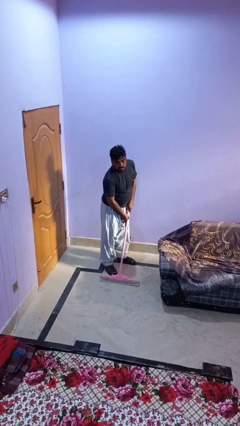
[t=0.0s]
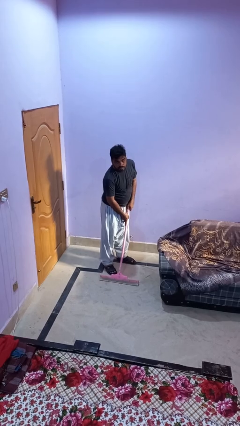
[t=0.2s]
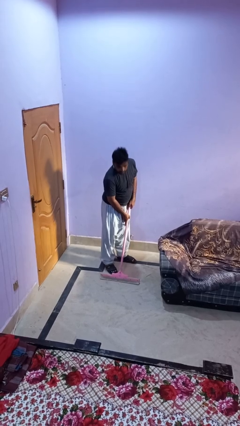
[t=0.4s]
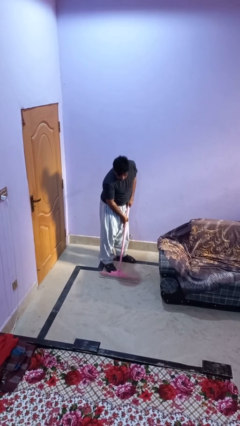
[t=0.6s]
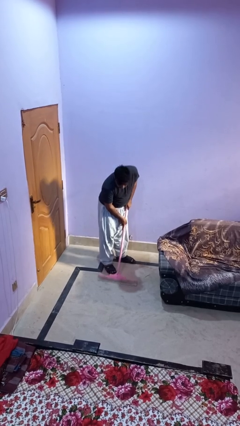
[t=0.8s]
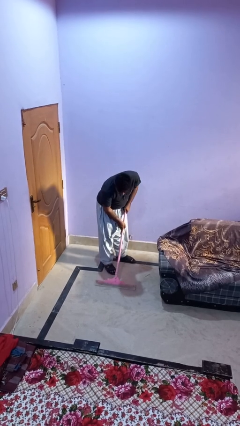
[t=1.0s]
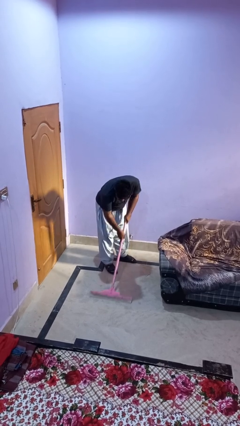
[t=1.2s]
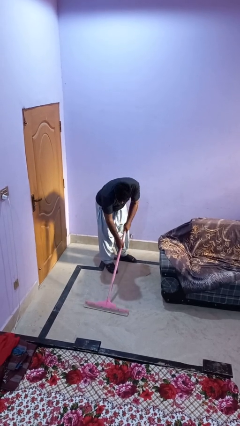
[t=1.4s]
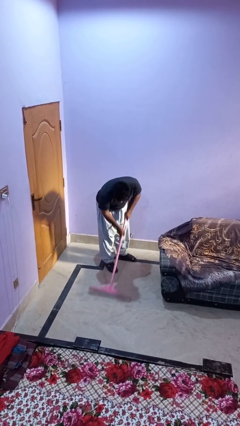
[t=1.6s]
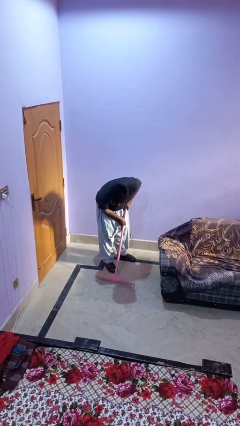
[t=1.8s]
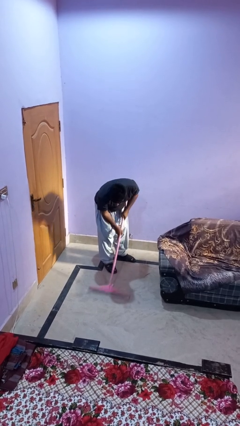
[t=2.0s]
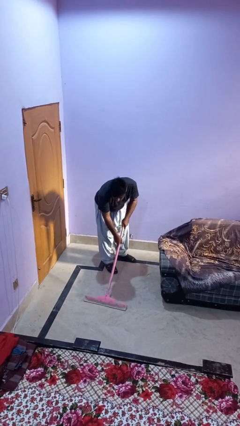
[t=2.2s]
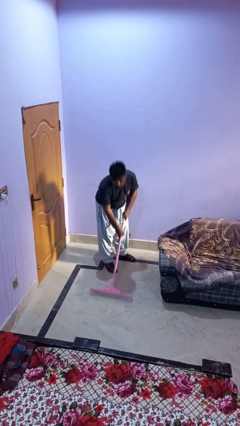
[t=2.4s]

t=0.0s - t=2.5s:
person vacuums carpet

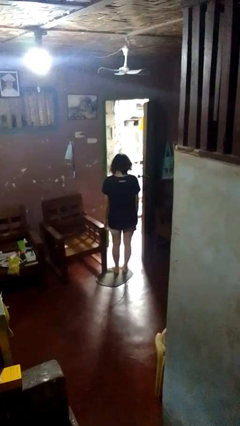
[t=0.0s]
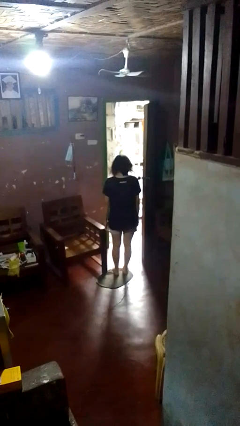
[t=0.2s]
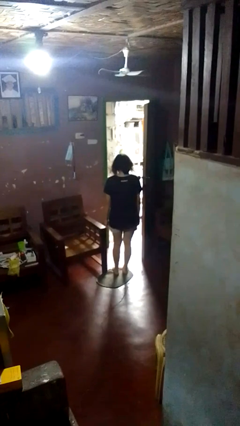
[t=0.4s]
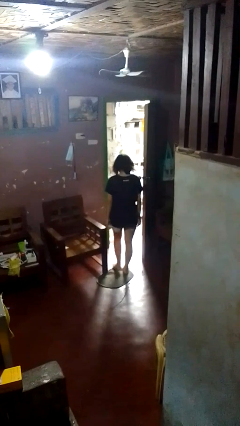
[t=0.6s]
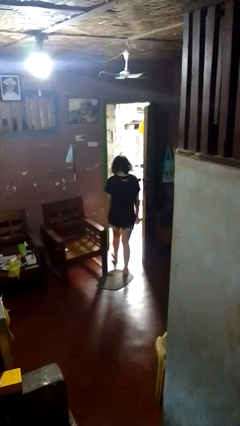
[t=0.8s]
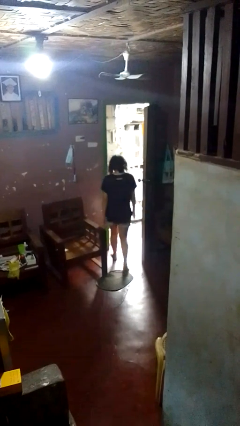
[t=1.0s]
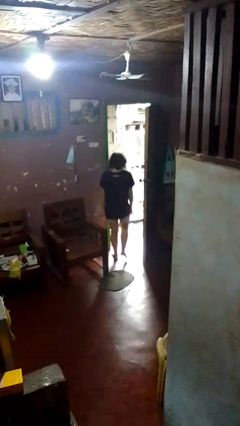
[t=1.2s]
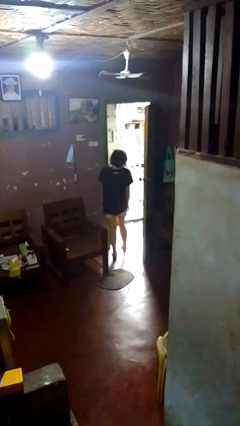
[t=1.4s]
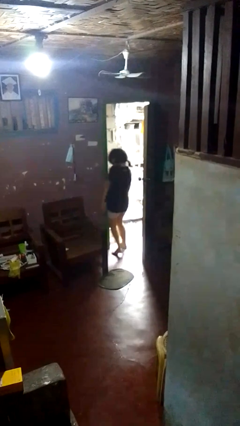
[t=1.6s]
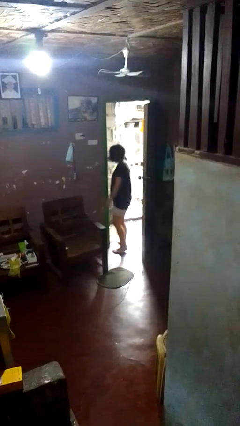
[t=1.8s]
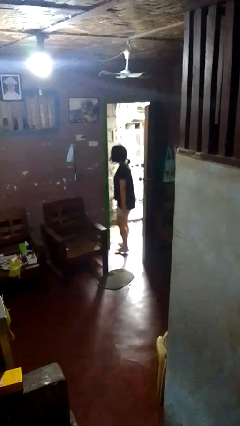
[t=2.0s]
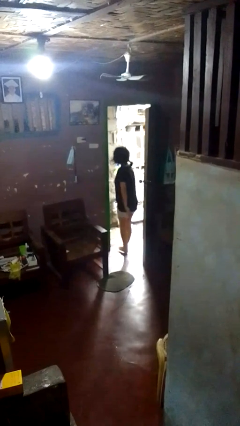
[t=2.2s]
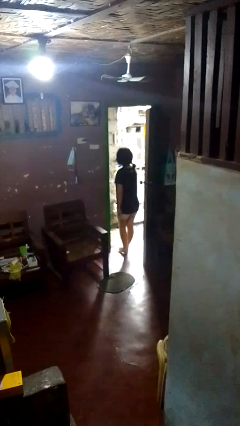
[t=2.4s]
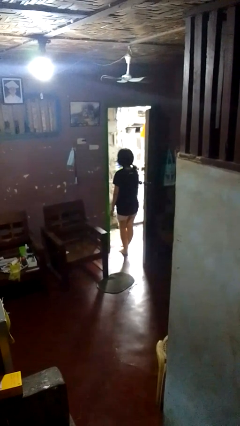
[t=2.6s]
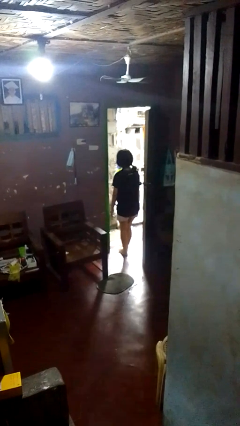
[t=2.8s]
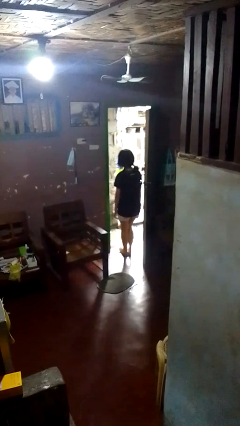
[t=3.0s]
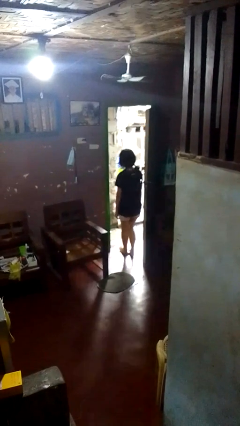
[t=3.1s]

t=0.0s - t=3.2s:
person bumps into wall

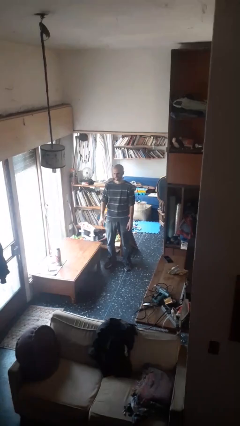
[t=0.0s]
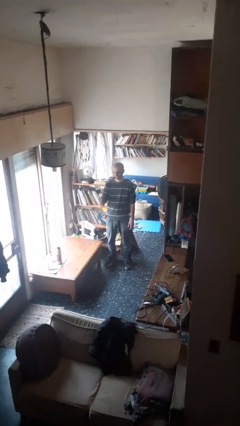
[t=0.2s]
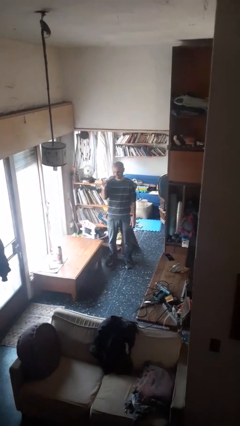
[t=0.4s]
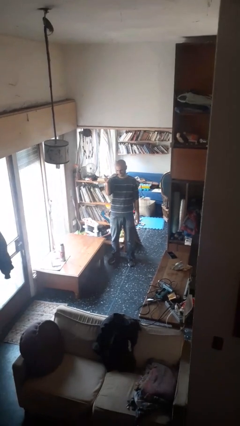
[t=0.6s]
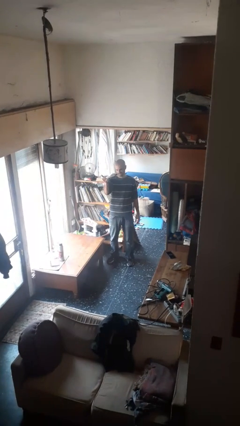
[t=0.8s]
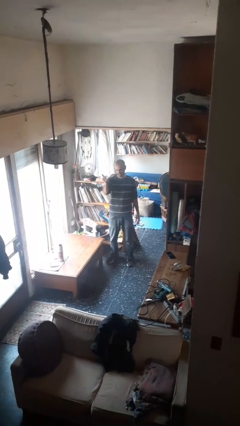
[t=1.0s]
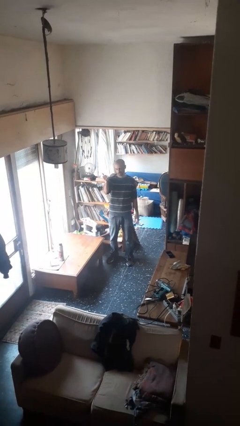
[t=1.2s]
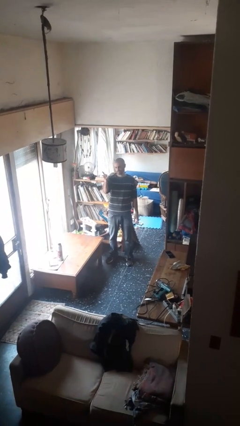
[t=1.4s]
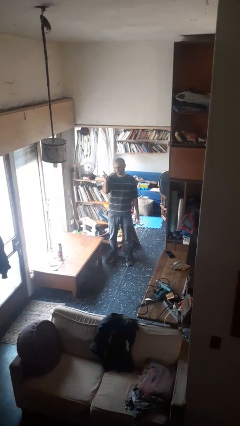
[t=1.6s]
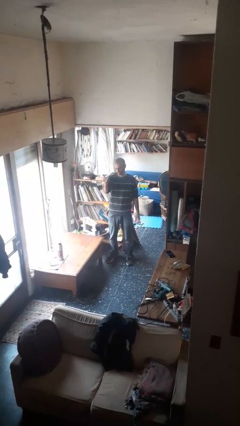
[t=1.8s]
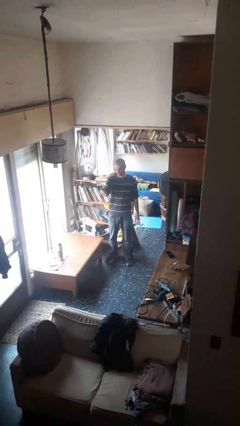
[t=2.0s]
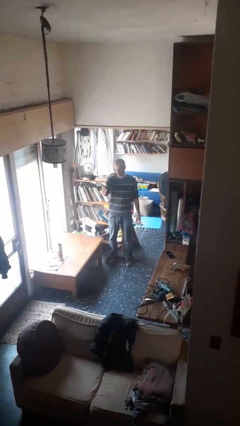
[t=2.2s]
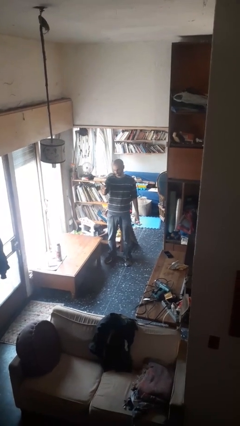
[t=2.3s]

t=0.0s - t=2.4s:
person gestures hang loose

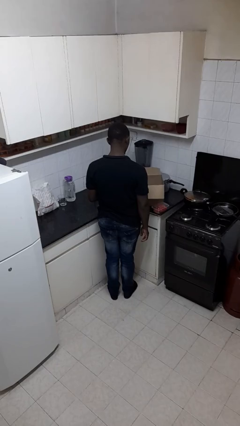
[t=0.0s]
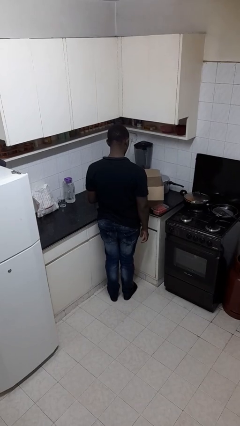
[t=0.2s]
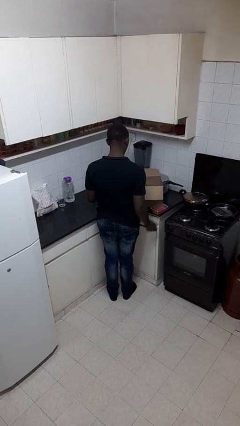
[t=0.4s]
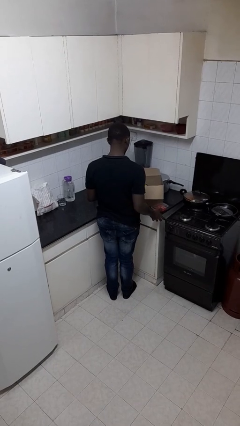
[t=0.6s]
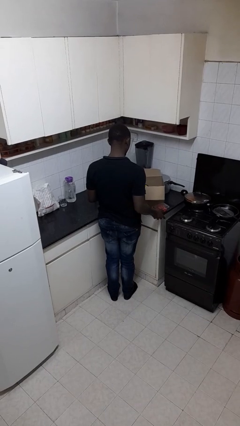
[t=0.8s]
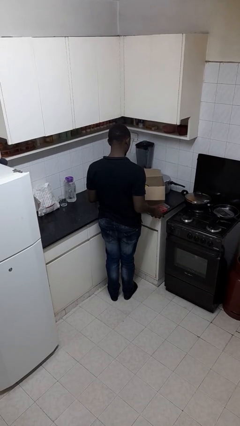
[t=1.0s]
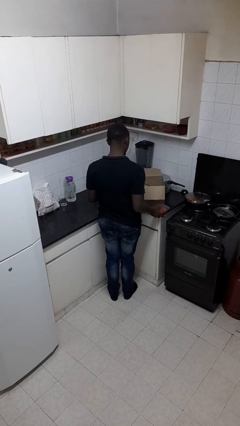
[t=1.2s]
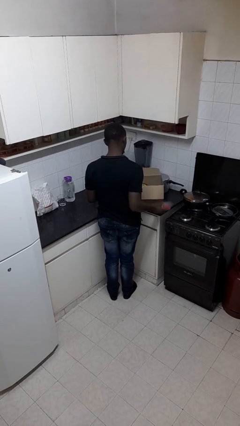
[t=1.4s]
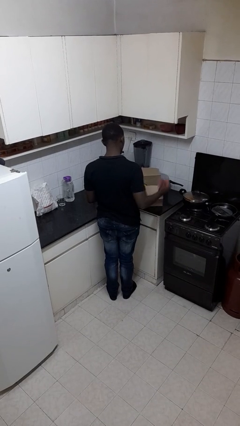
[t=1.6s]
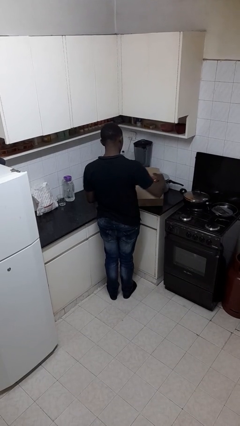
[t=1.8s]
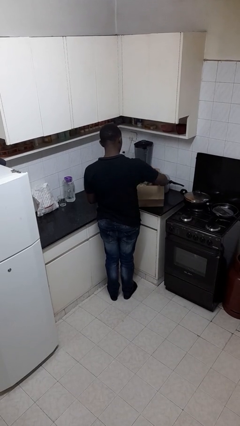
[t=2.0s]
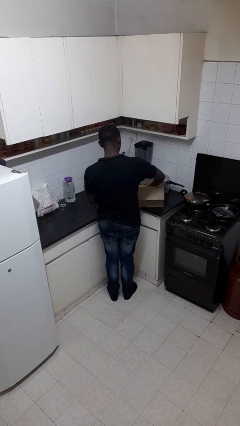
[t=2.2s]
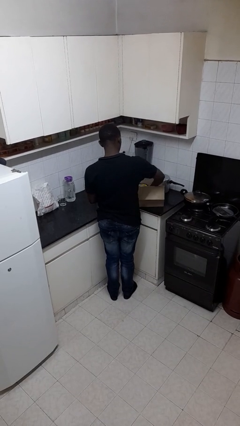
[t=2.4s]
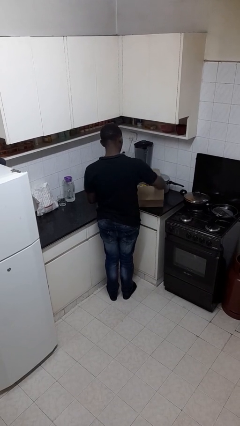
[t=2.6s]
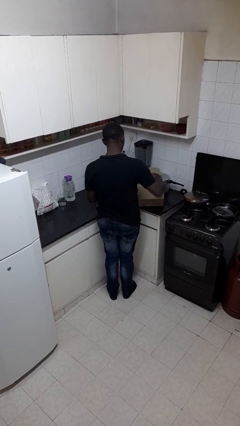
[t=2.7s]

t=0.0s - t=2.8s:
person puts object into box

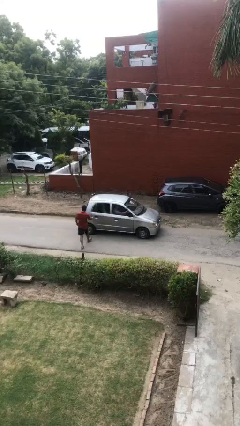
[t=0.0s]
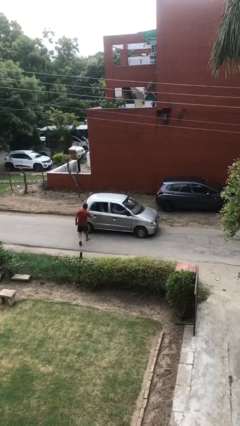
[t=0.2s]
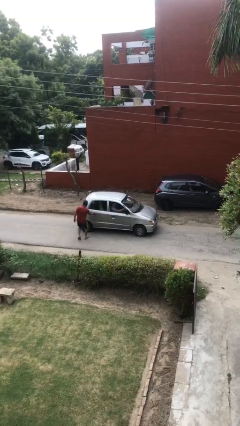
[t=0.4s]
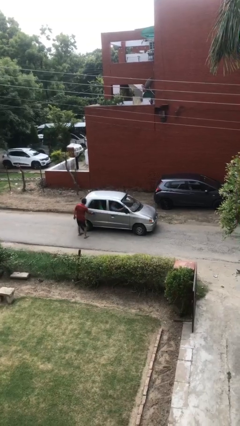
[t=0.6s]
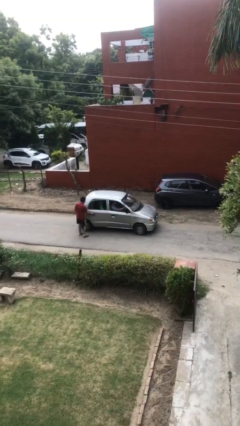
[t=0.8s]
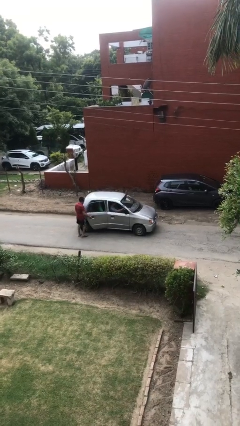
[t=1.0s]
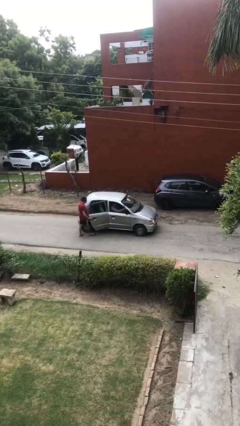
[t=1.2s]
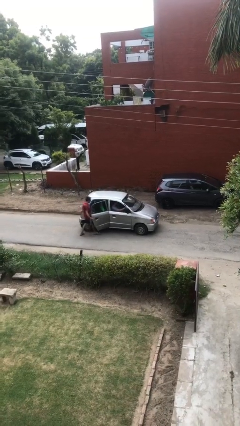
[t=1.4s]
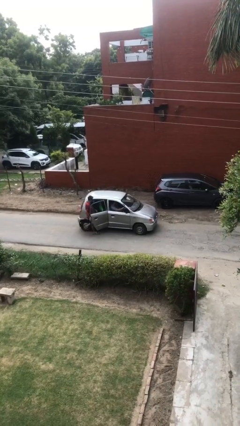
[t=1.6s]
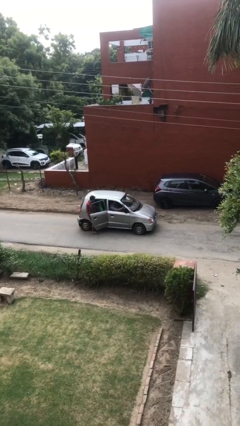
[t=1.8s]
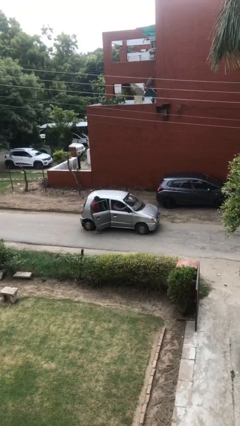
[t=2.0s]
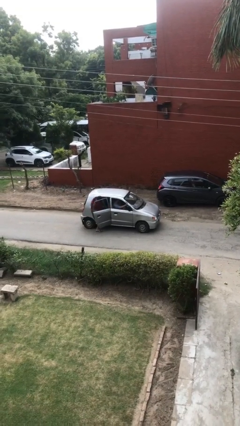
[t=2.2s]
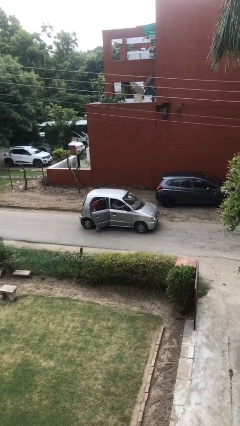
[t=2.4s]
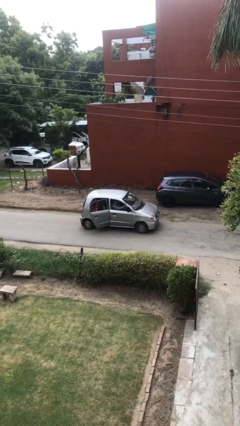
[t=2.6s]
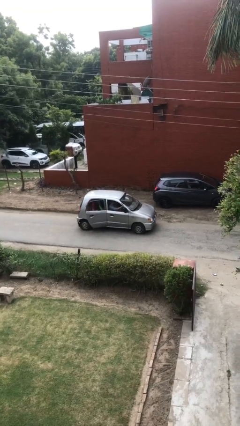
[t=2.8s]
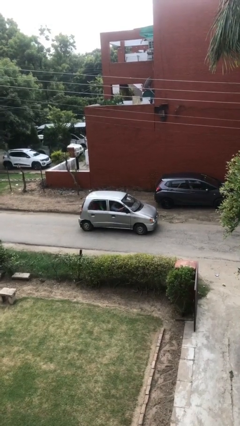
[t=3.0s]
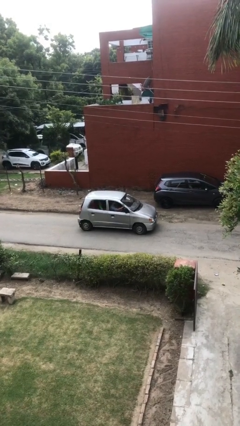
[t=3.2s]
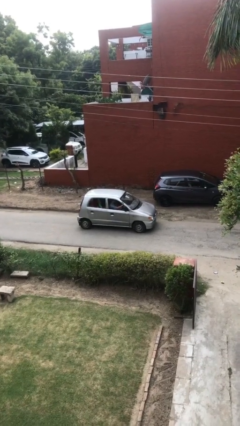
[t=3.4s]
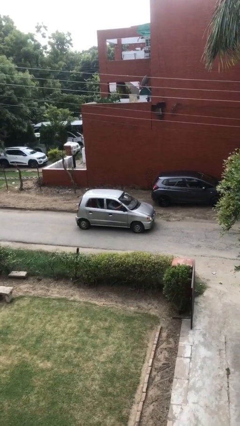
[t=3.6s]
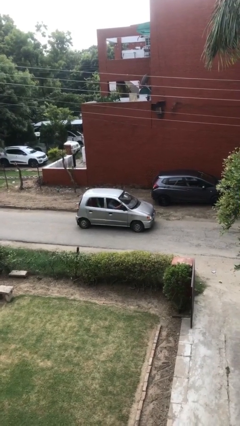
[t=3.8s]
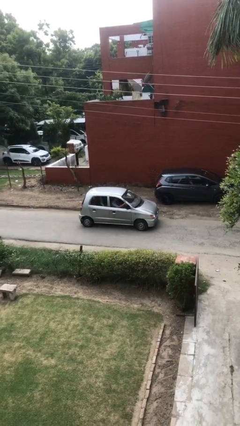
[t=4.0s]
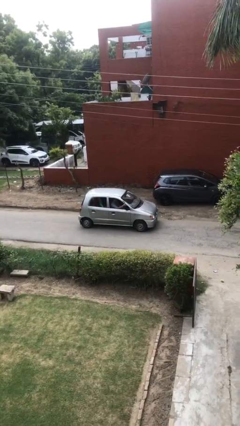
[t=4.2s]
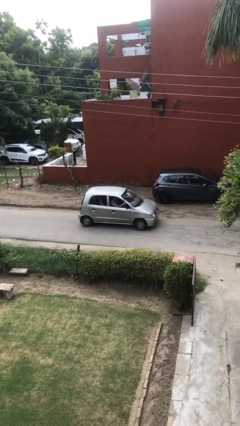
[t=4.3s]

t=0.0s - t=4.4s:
car picks up person

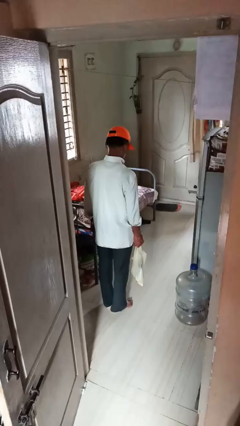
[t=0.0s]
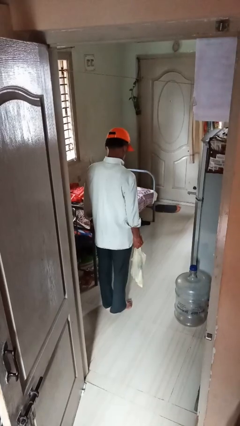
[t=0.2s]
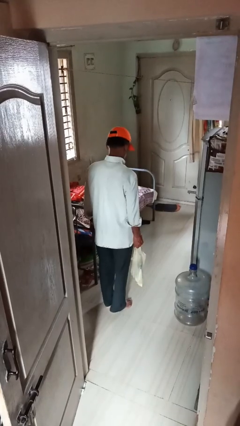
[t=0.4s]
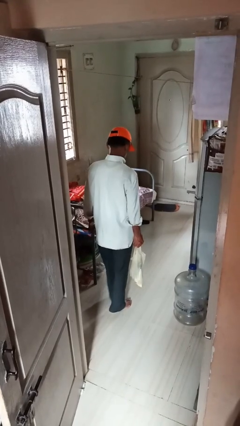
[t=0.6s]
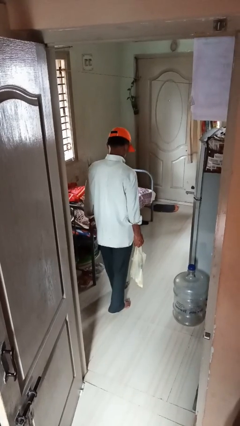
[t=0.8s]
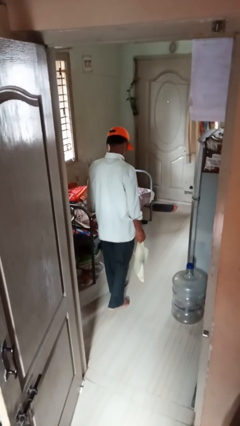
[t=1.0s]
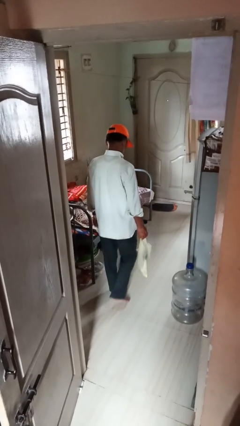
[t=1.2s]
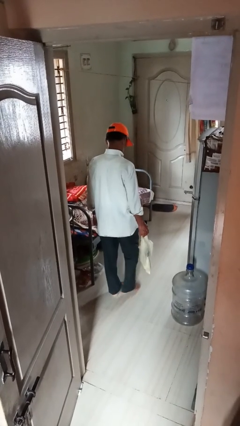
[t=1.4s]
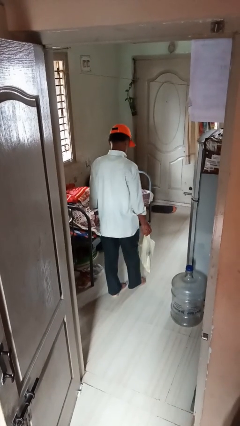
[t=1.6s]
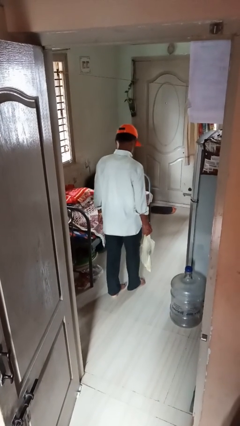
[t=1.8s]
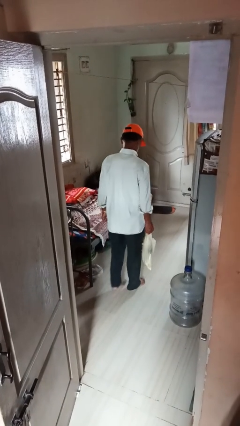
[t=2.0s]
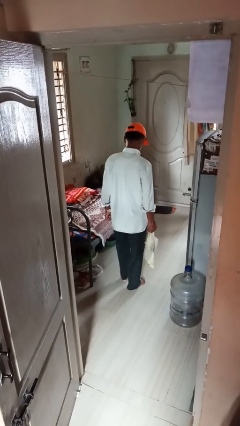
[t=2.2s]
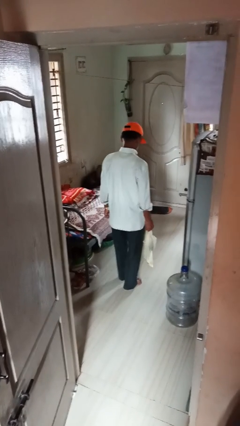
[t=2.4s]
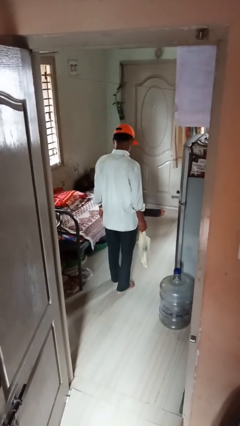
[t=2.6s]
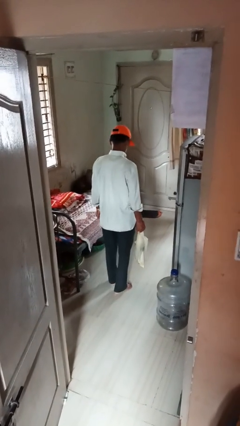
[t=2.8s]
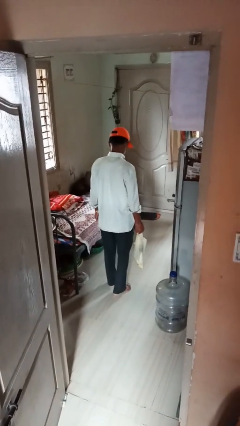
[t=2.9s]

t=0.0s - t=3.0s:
person carries groceries
